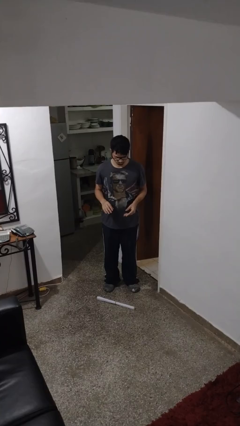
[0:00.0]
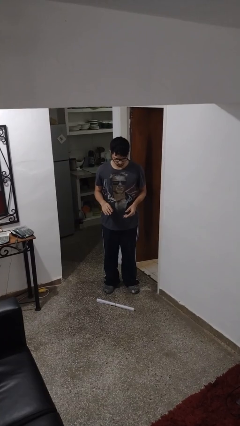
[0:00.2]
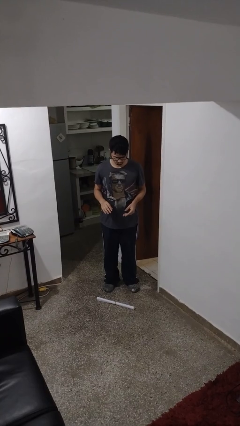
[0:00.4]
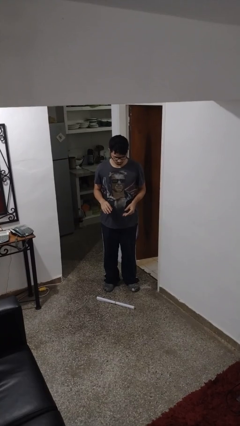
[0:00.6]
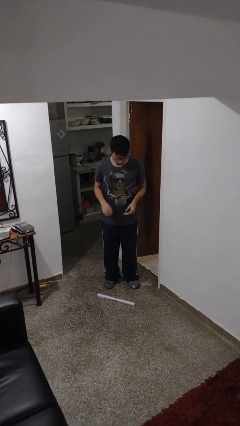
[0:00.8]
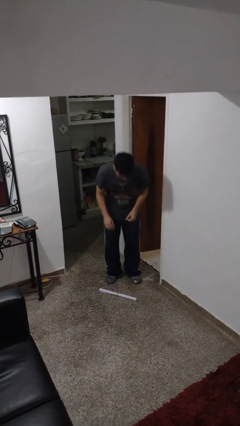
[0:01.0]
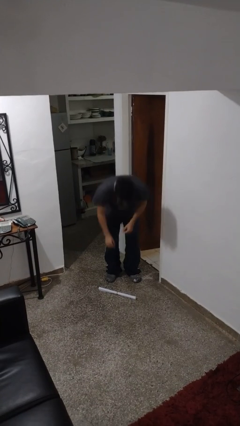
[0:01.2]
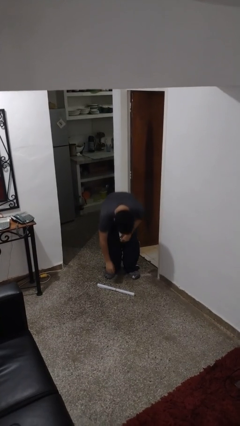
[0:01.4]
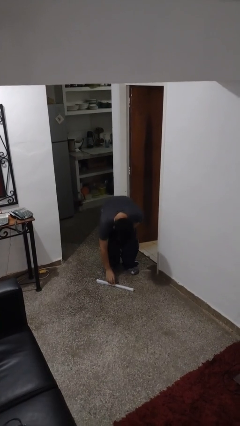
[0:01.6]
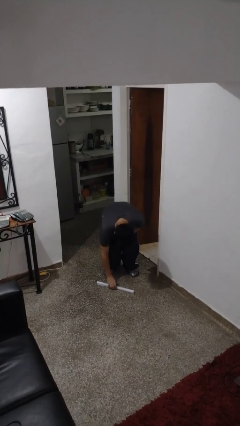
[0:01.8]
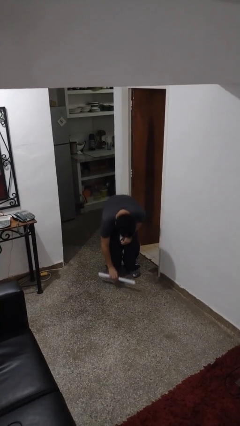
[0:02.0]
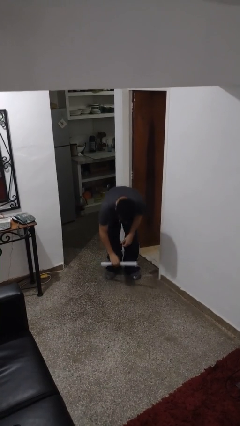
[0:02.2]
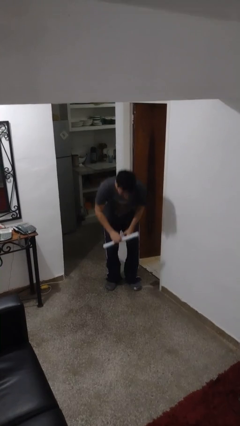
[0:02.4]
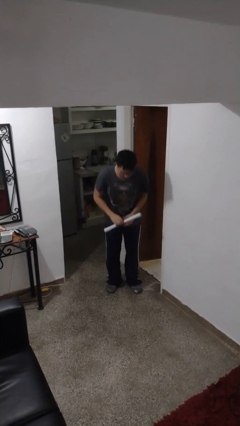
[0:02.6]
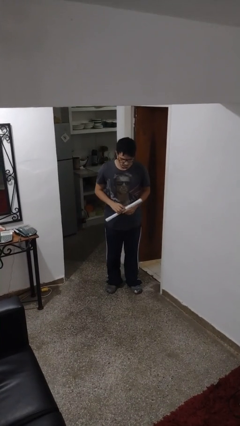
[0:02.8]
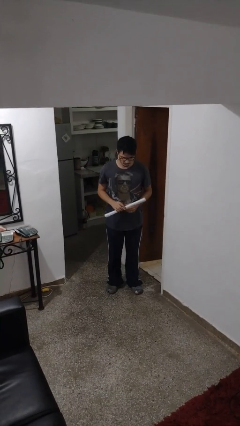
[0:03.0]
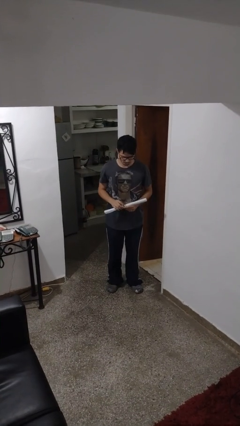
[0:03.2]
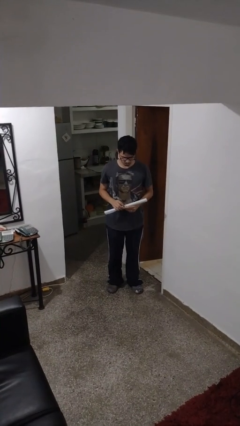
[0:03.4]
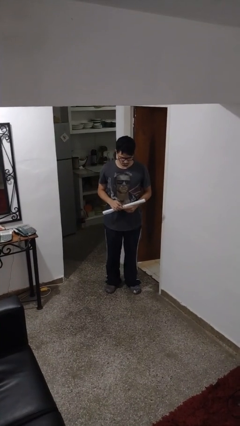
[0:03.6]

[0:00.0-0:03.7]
person picks up object from floor

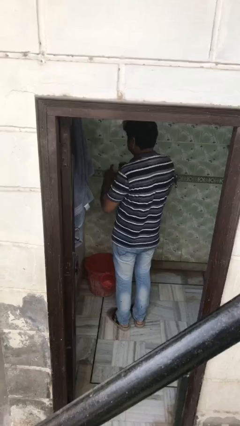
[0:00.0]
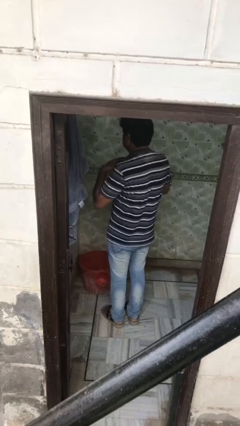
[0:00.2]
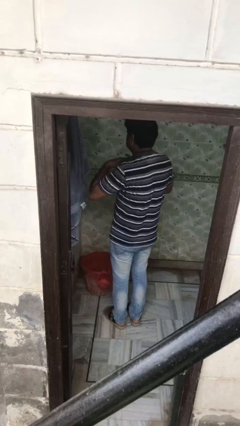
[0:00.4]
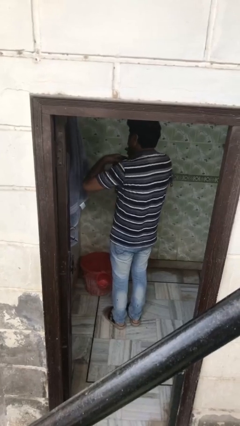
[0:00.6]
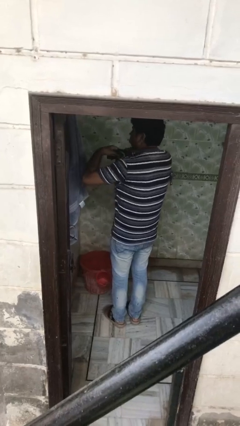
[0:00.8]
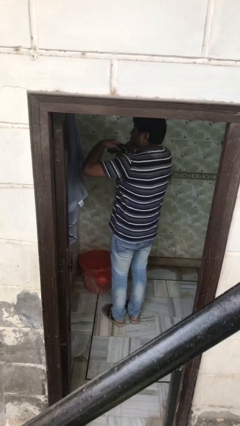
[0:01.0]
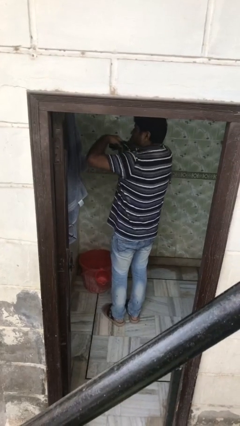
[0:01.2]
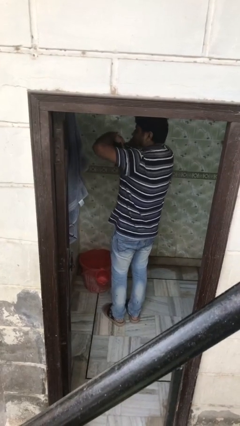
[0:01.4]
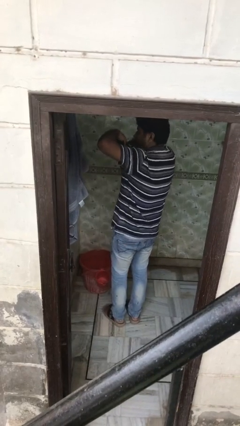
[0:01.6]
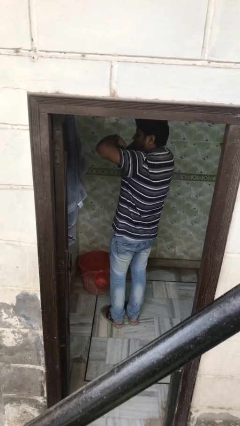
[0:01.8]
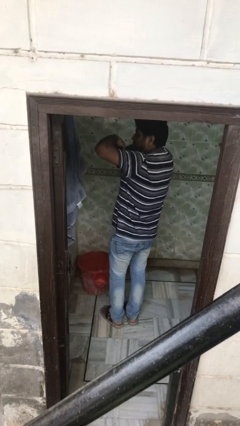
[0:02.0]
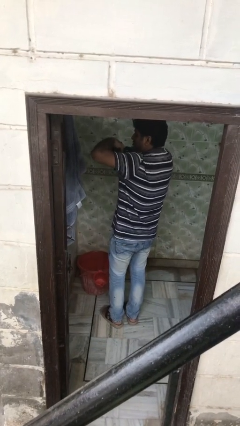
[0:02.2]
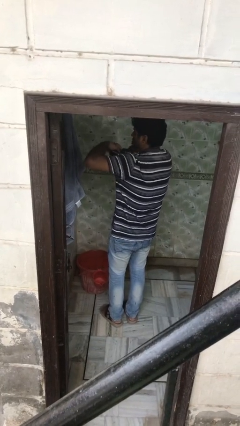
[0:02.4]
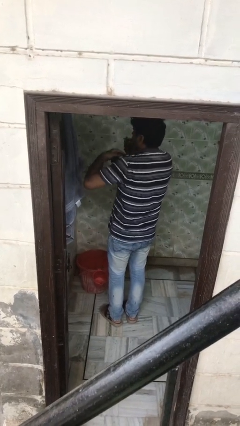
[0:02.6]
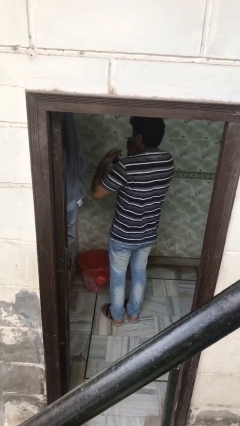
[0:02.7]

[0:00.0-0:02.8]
person applies deodorant

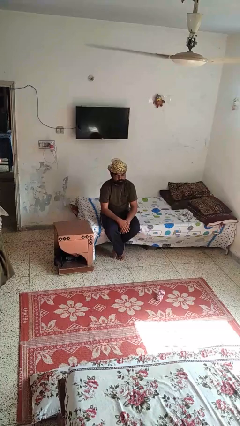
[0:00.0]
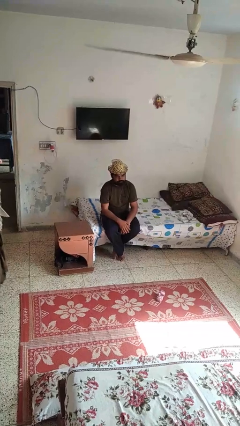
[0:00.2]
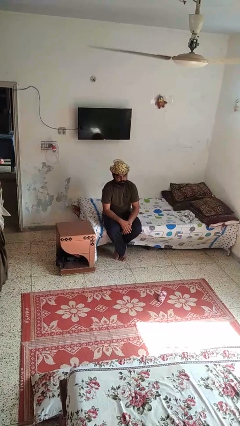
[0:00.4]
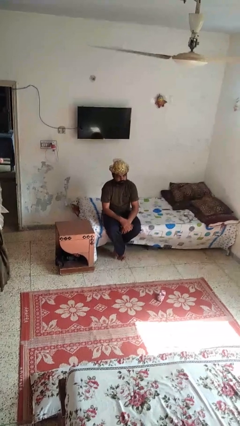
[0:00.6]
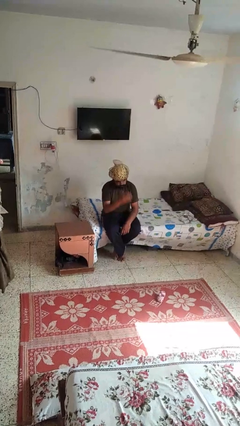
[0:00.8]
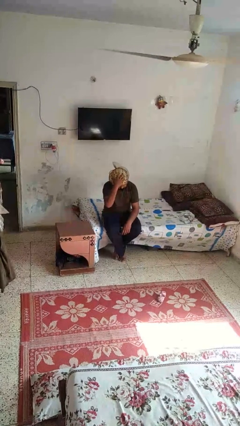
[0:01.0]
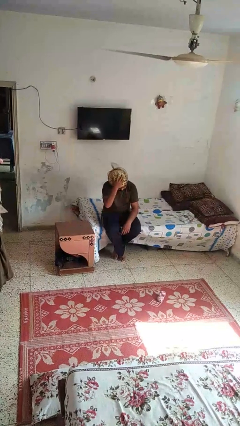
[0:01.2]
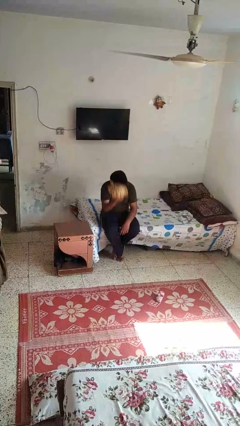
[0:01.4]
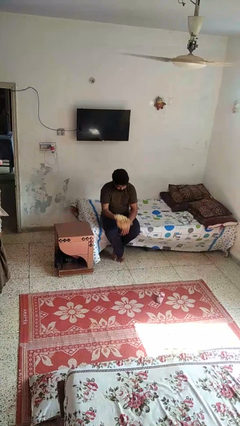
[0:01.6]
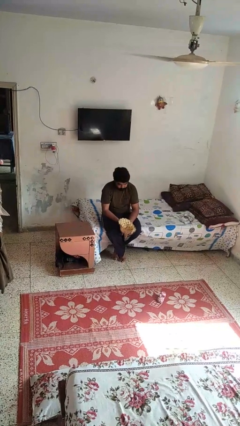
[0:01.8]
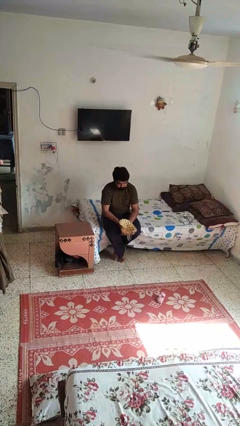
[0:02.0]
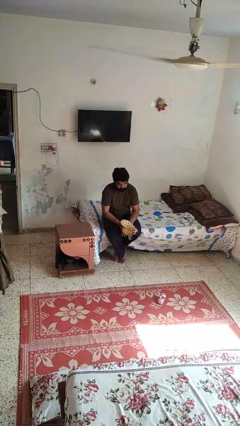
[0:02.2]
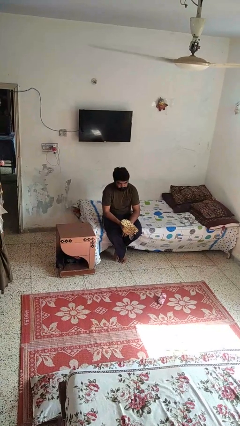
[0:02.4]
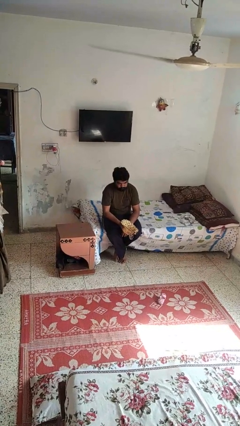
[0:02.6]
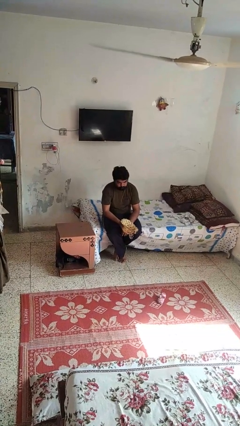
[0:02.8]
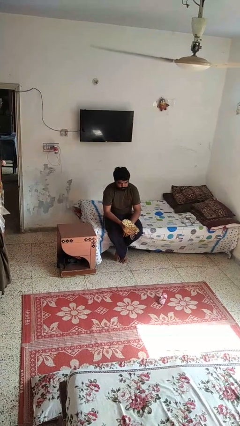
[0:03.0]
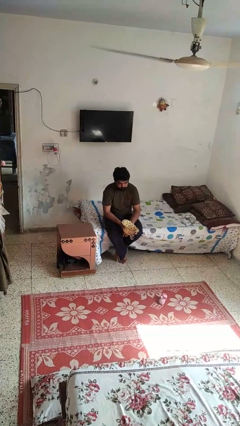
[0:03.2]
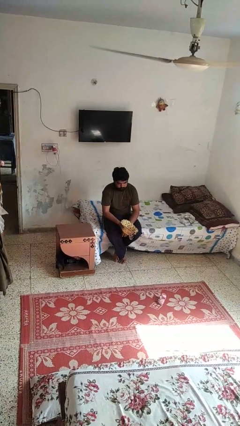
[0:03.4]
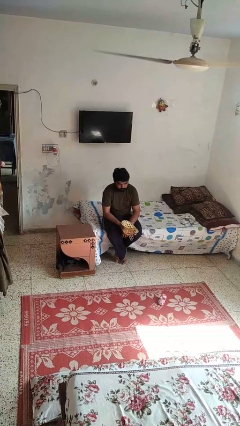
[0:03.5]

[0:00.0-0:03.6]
person takes off hat

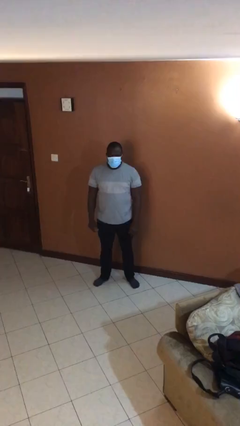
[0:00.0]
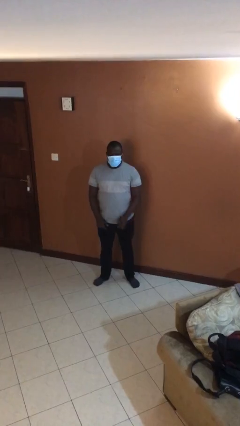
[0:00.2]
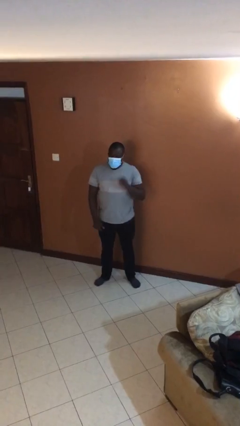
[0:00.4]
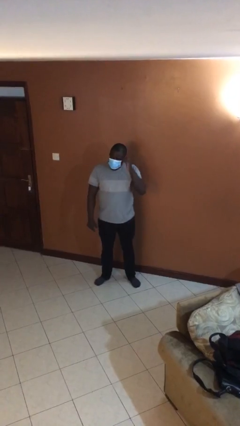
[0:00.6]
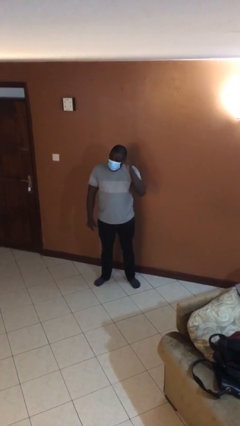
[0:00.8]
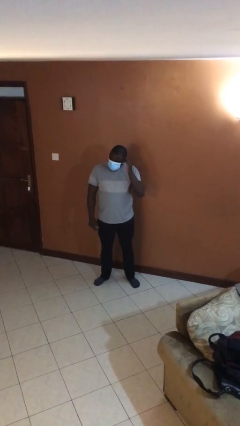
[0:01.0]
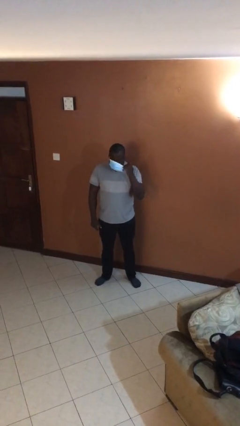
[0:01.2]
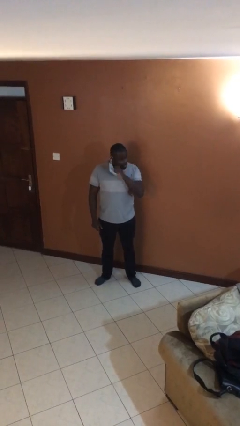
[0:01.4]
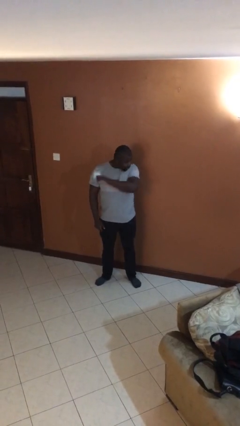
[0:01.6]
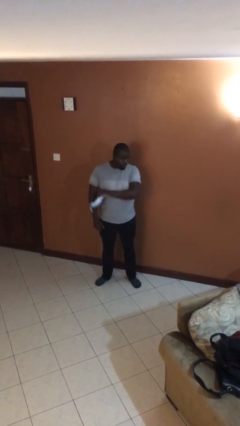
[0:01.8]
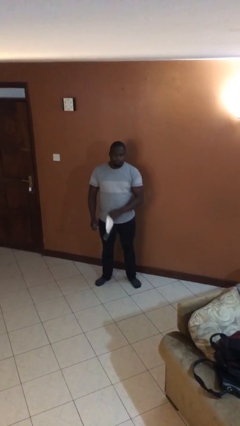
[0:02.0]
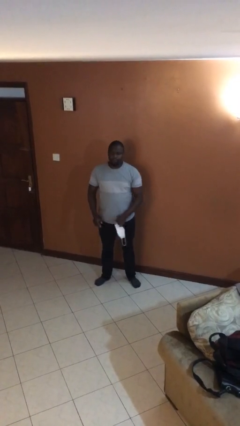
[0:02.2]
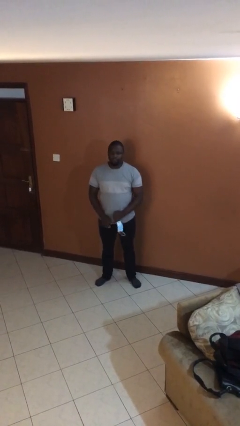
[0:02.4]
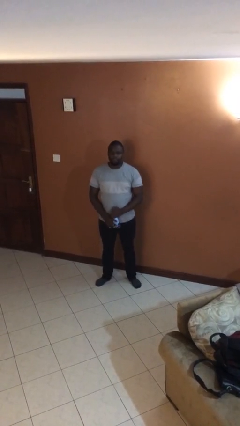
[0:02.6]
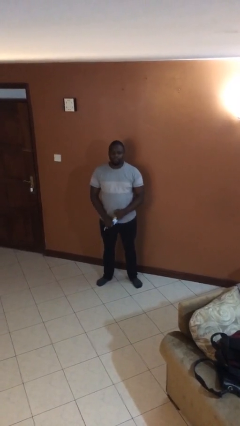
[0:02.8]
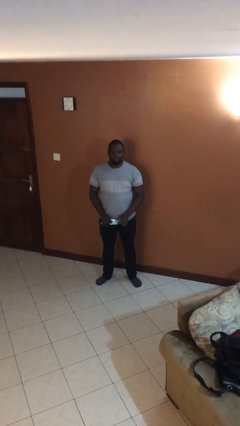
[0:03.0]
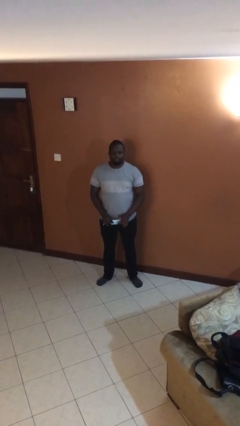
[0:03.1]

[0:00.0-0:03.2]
person takes off facemask

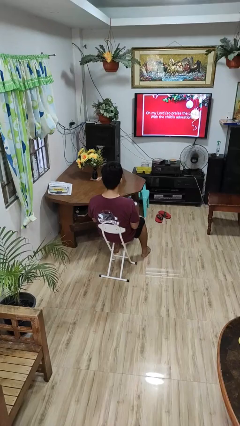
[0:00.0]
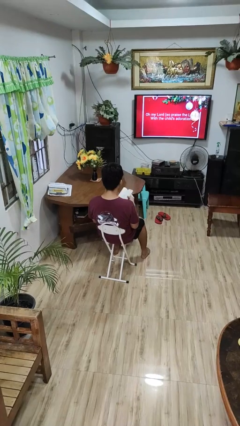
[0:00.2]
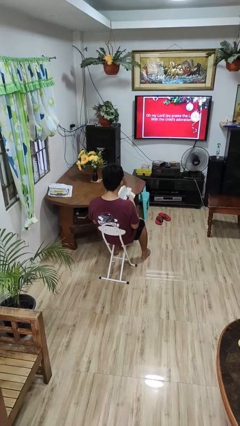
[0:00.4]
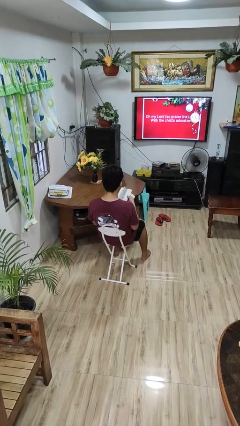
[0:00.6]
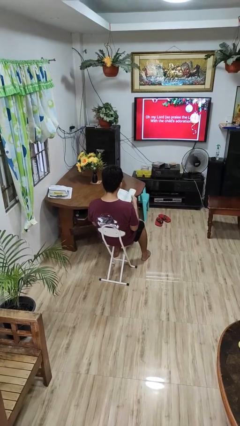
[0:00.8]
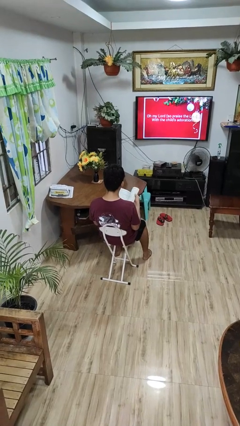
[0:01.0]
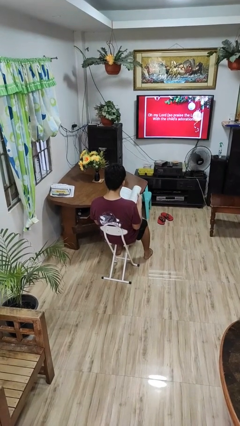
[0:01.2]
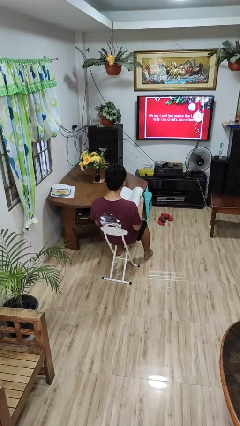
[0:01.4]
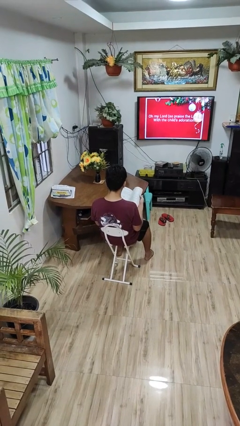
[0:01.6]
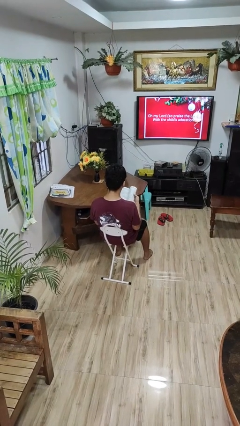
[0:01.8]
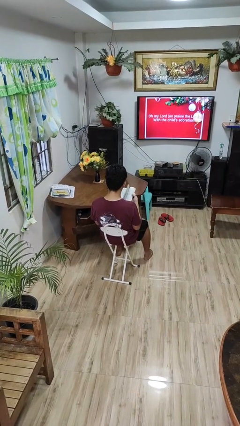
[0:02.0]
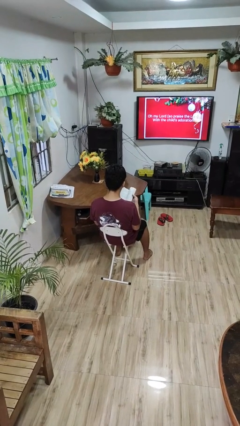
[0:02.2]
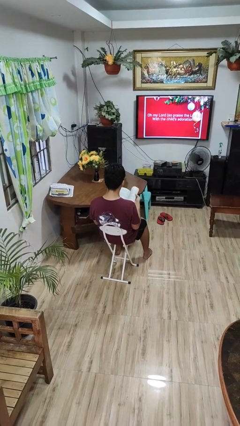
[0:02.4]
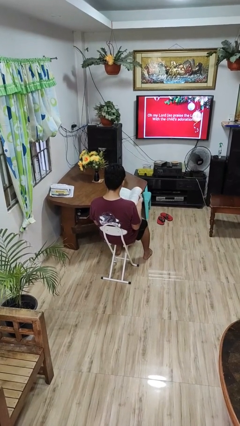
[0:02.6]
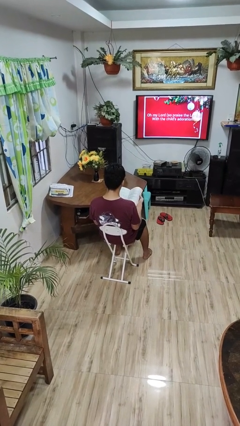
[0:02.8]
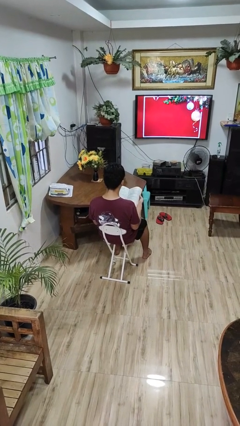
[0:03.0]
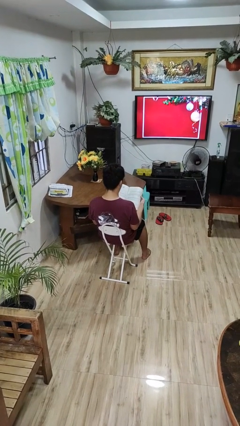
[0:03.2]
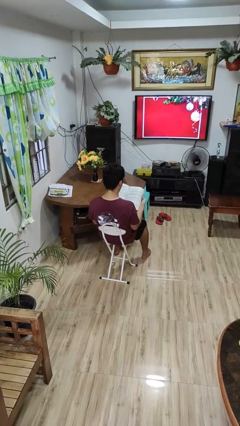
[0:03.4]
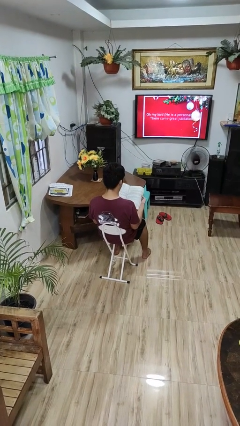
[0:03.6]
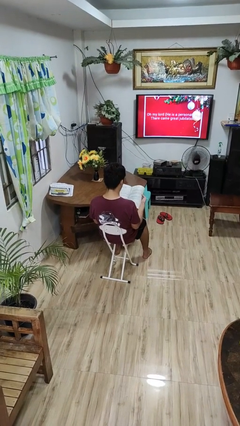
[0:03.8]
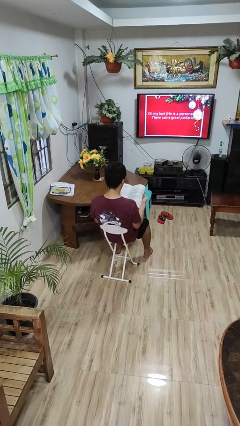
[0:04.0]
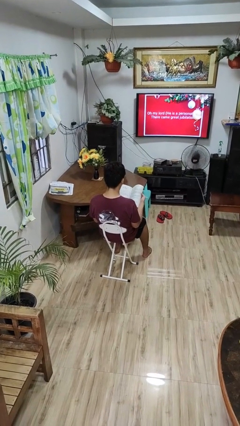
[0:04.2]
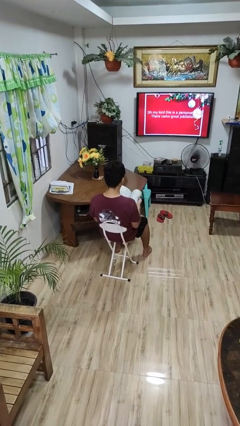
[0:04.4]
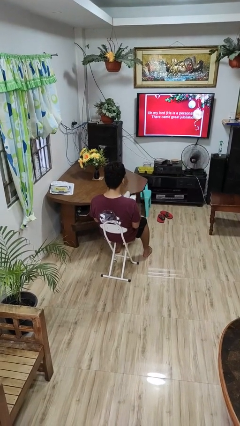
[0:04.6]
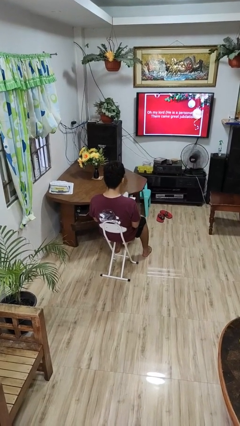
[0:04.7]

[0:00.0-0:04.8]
person reads book
